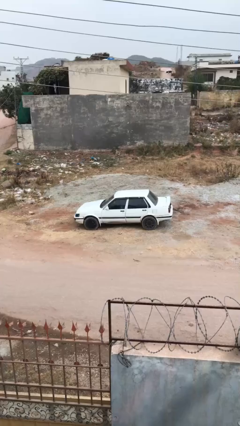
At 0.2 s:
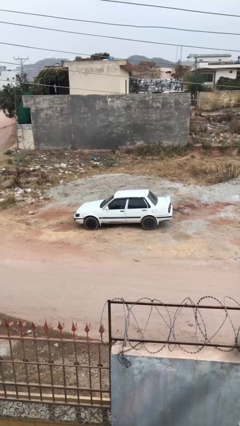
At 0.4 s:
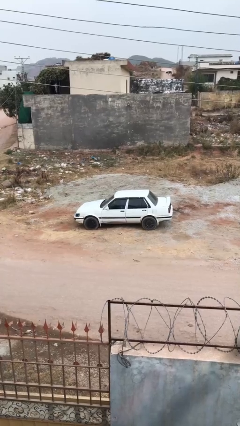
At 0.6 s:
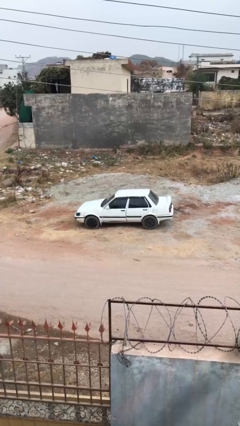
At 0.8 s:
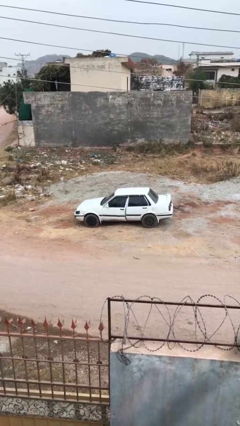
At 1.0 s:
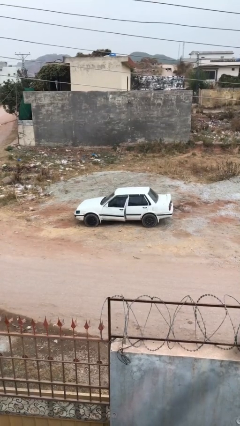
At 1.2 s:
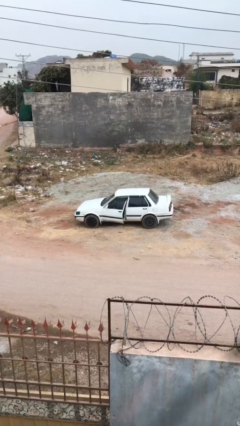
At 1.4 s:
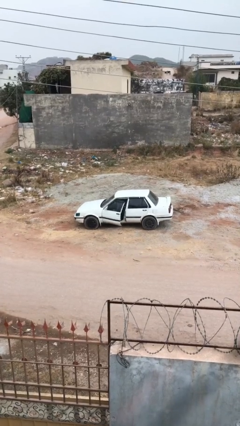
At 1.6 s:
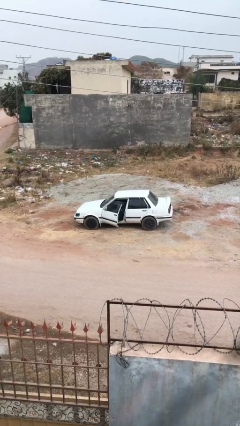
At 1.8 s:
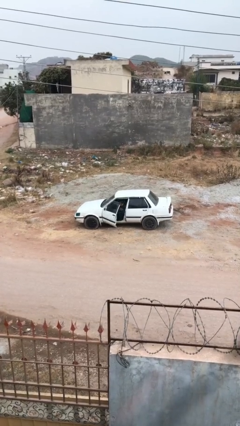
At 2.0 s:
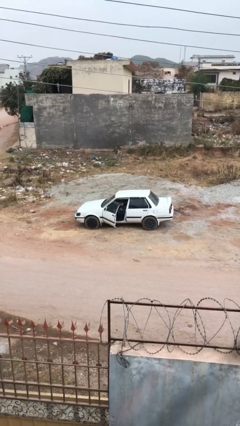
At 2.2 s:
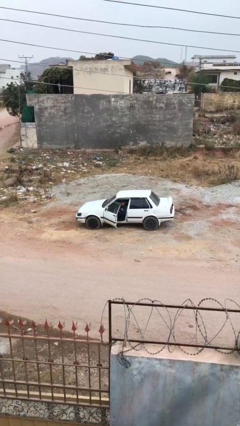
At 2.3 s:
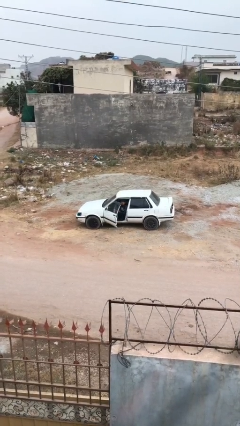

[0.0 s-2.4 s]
person opens car door

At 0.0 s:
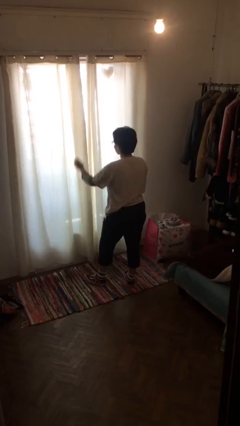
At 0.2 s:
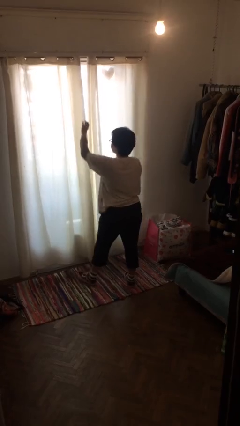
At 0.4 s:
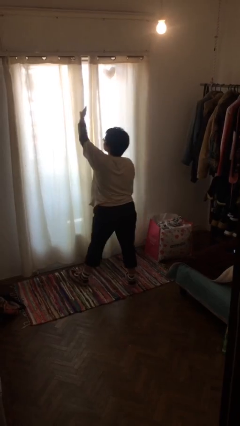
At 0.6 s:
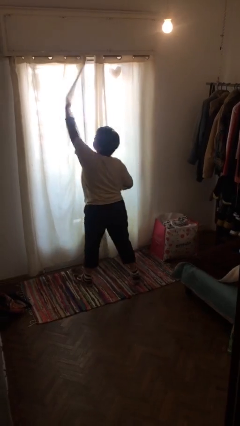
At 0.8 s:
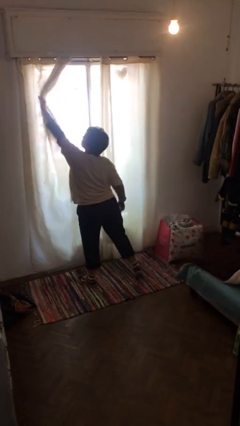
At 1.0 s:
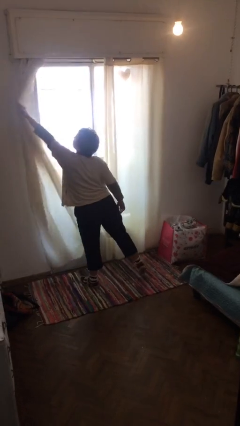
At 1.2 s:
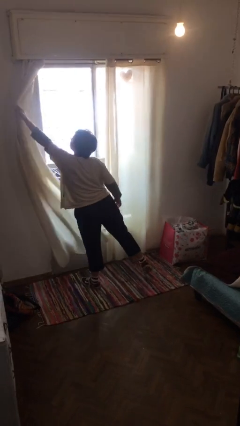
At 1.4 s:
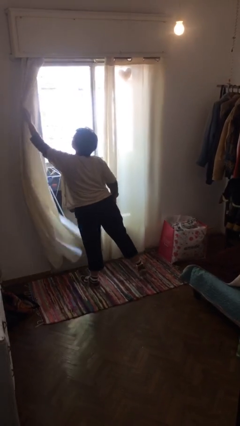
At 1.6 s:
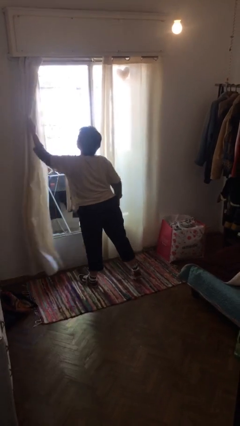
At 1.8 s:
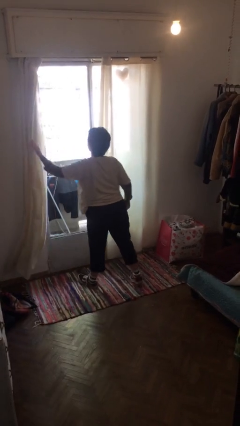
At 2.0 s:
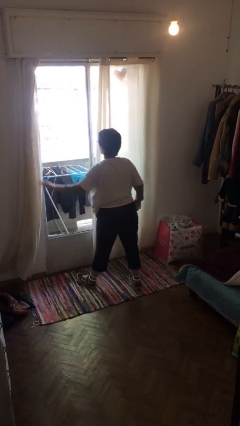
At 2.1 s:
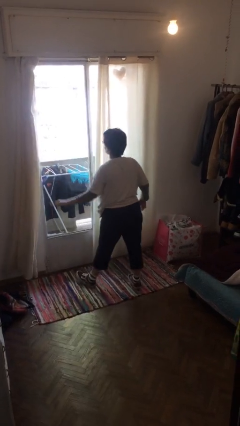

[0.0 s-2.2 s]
person opens curtains

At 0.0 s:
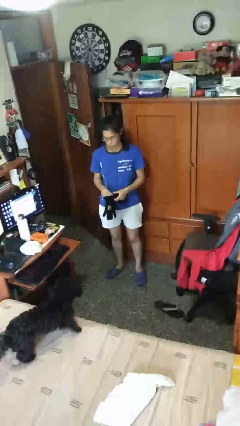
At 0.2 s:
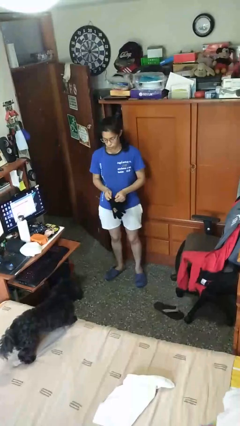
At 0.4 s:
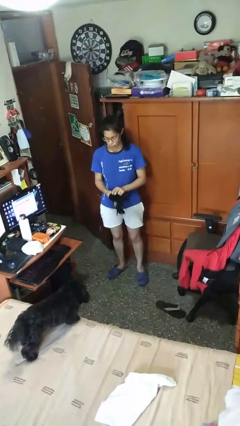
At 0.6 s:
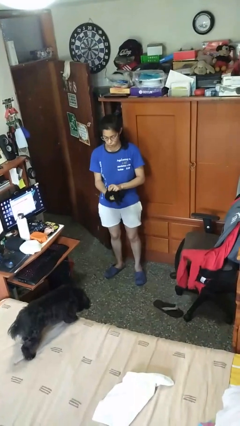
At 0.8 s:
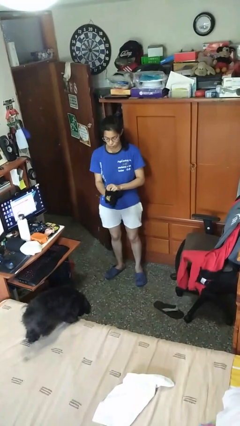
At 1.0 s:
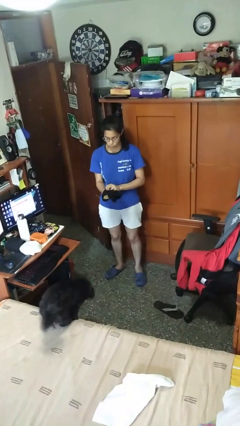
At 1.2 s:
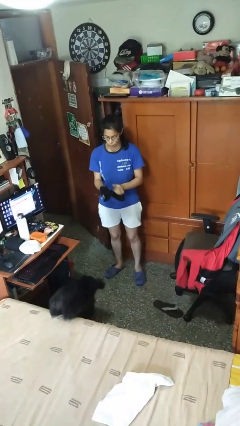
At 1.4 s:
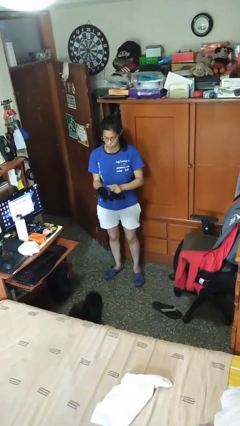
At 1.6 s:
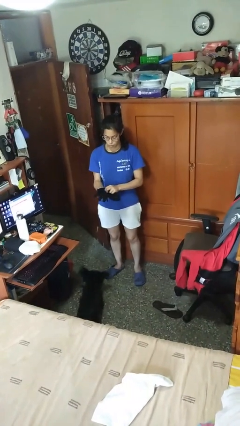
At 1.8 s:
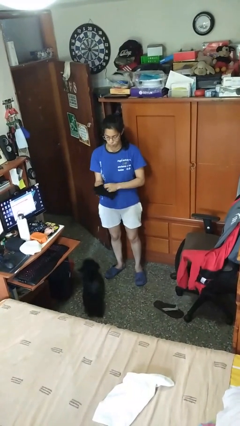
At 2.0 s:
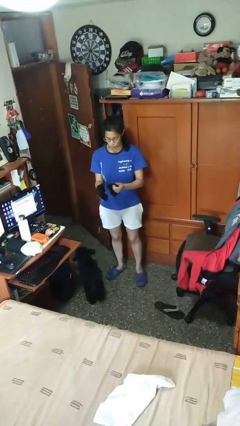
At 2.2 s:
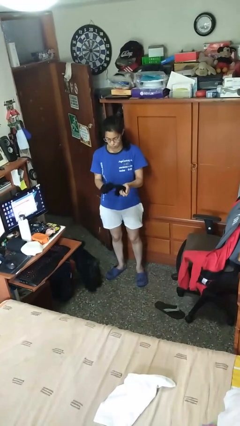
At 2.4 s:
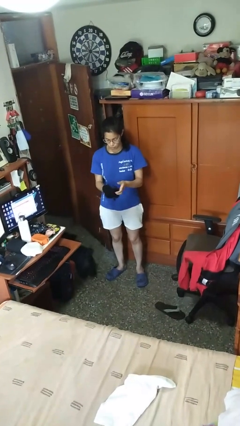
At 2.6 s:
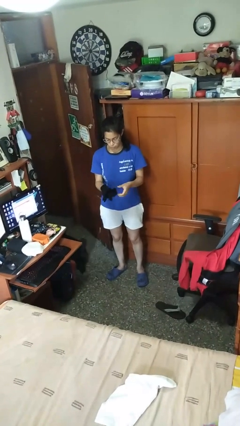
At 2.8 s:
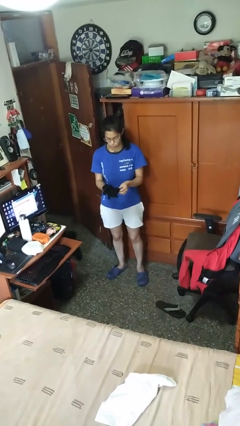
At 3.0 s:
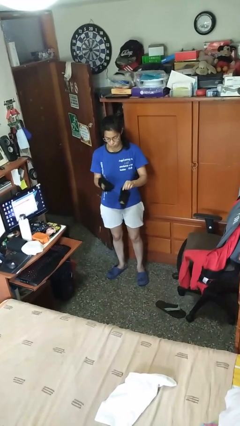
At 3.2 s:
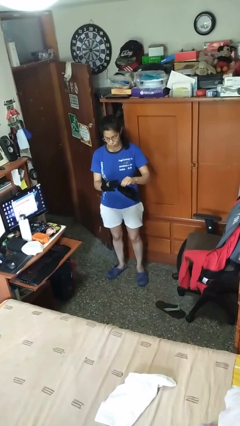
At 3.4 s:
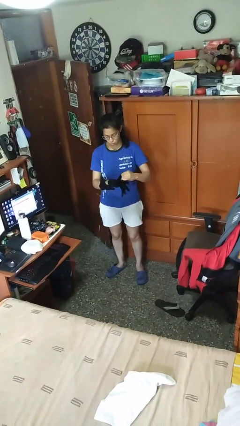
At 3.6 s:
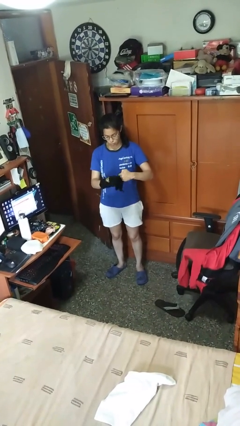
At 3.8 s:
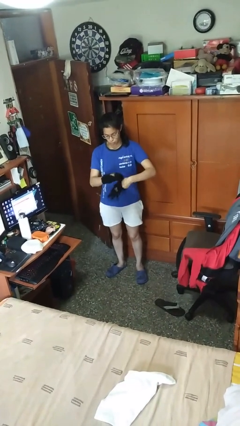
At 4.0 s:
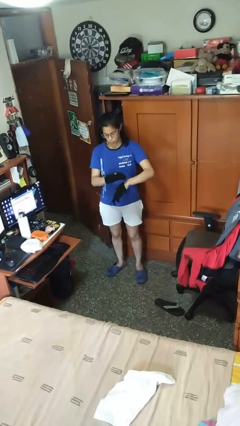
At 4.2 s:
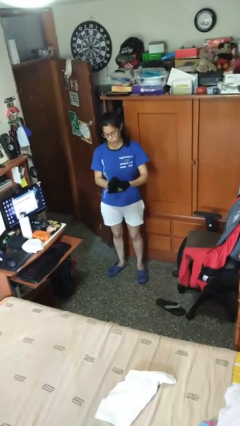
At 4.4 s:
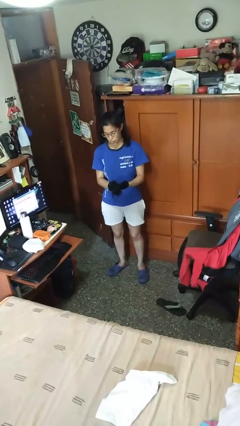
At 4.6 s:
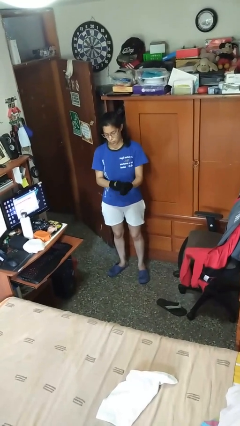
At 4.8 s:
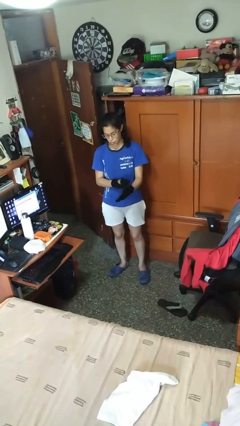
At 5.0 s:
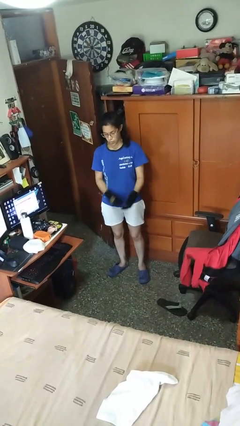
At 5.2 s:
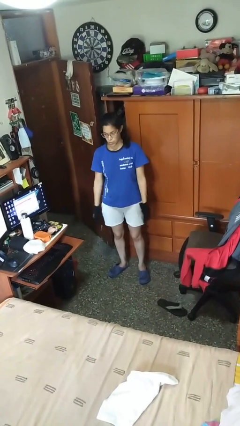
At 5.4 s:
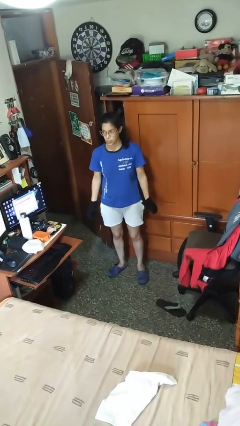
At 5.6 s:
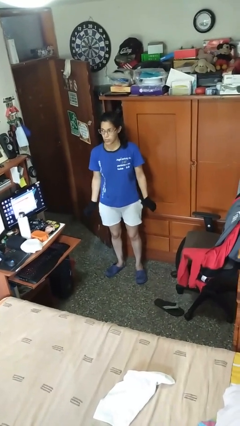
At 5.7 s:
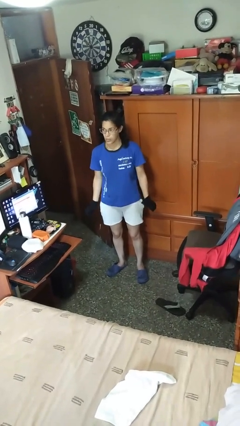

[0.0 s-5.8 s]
person puts on gloves

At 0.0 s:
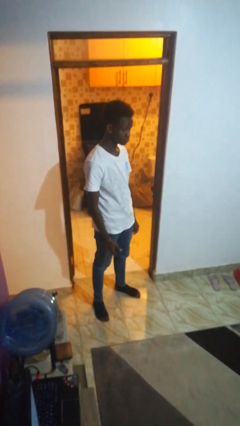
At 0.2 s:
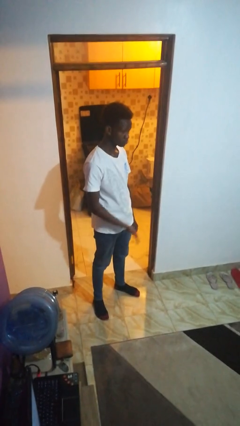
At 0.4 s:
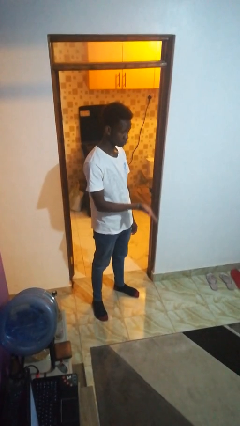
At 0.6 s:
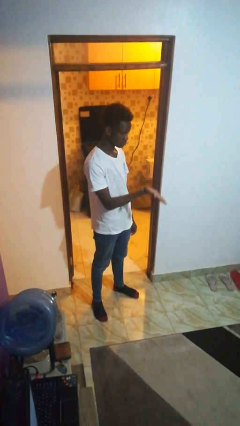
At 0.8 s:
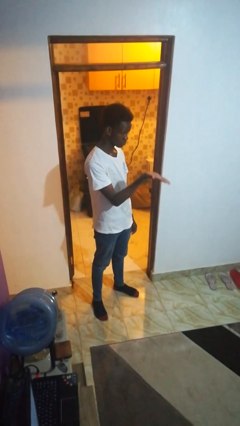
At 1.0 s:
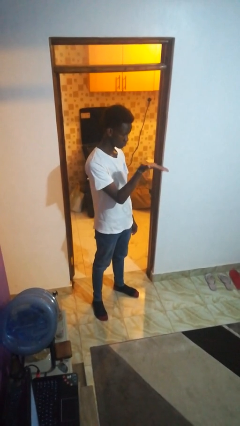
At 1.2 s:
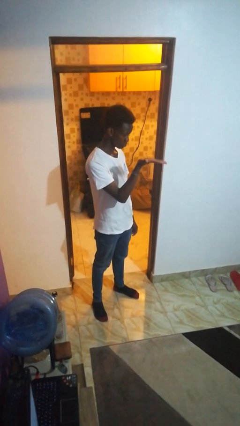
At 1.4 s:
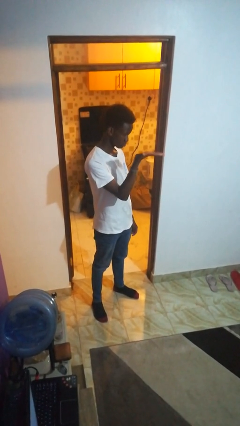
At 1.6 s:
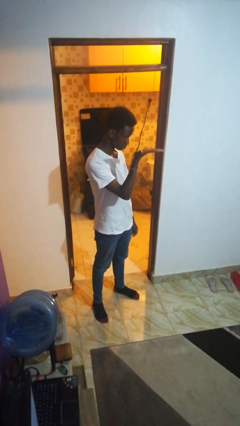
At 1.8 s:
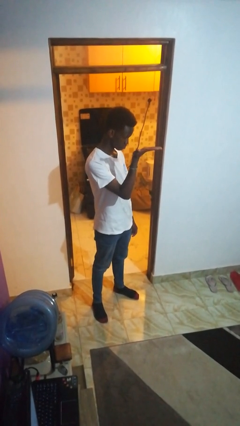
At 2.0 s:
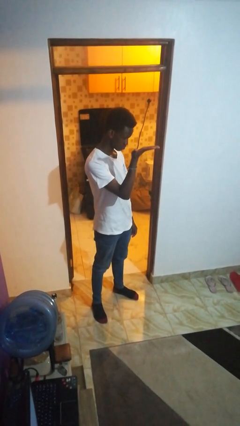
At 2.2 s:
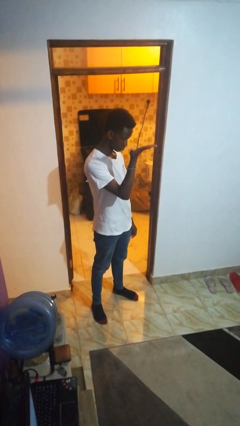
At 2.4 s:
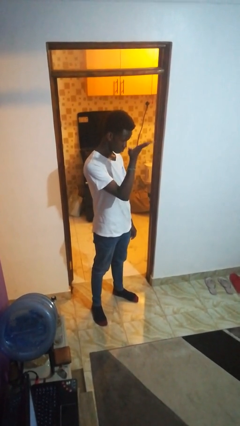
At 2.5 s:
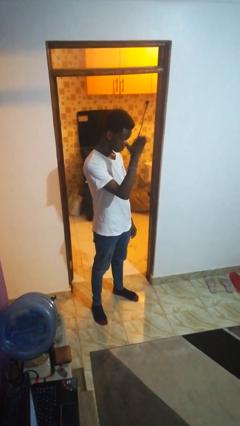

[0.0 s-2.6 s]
person gestures swipe up

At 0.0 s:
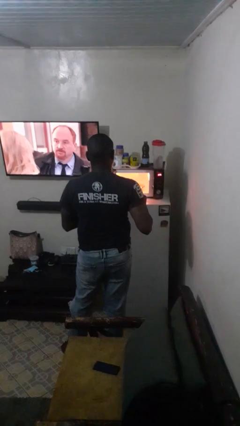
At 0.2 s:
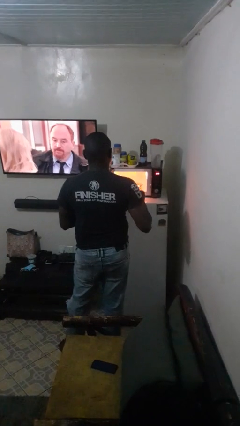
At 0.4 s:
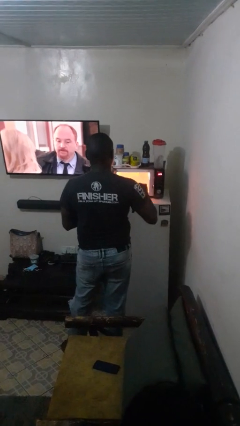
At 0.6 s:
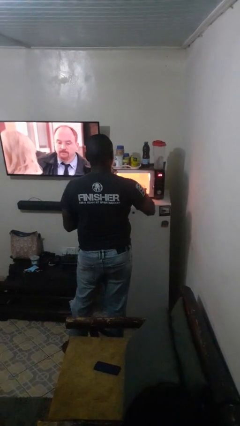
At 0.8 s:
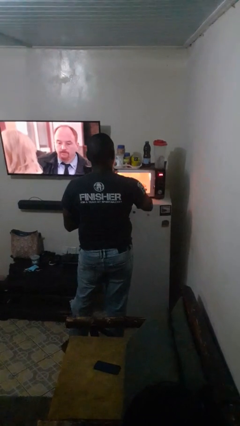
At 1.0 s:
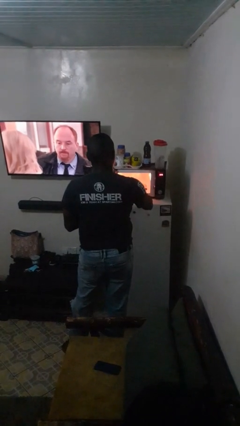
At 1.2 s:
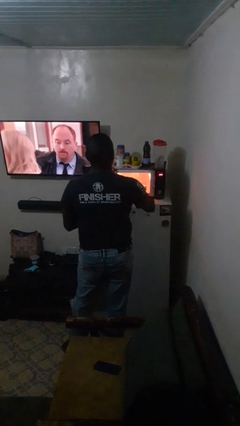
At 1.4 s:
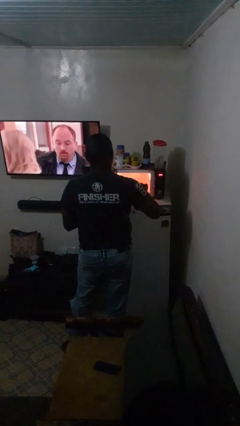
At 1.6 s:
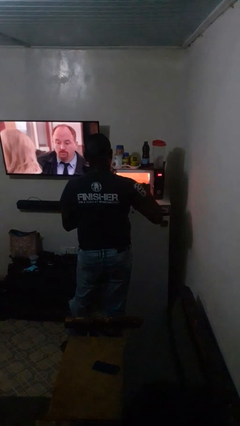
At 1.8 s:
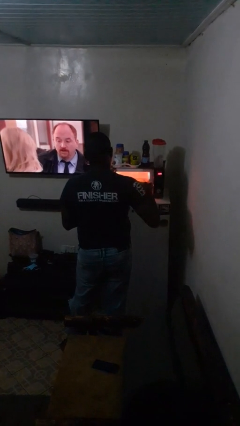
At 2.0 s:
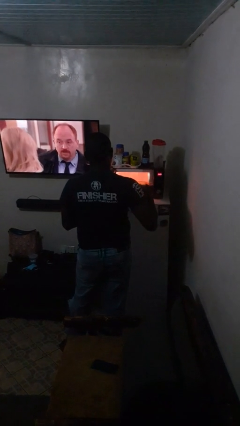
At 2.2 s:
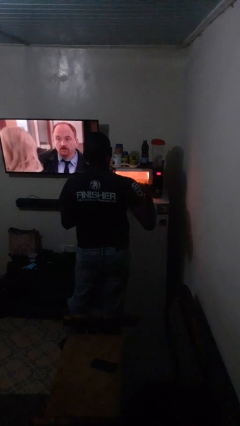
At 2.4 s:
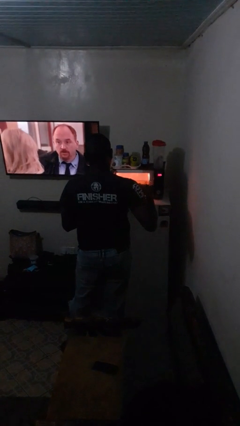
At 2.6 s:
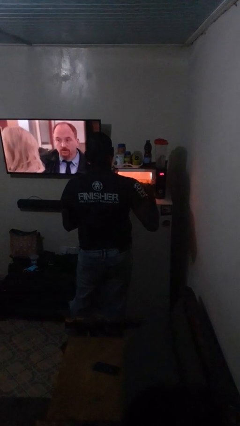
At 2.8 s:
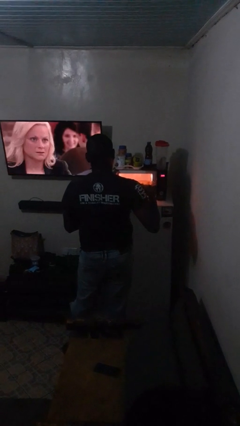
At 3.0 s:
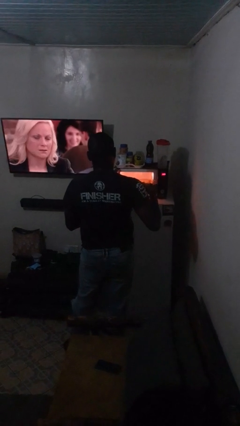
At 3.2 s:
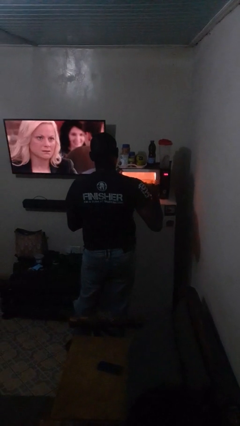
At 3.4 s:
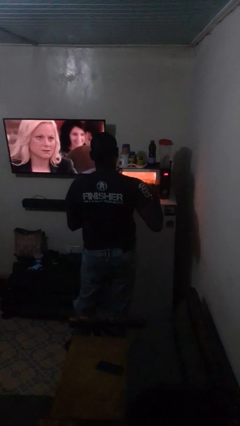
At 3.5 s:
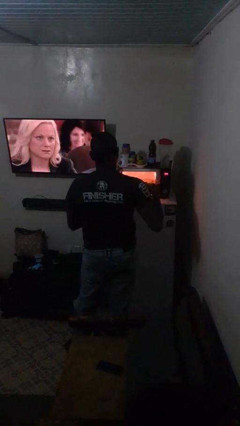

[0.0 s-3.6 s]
person takes object from microwave

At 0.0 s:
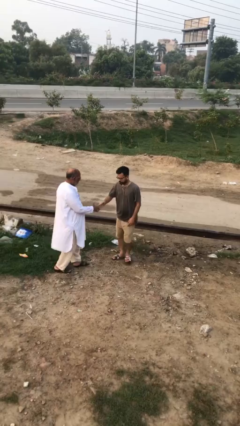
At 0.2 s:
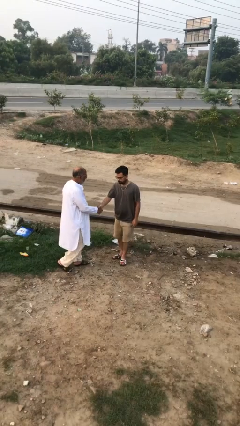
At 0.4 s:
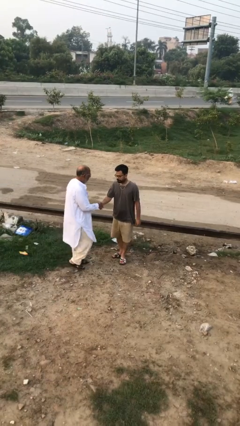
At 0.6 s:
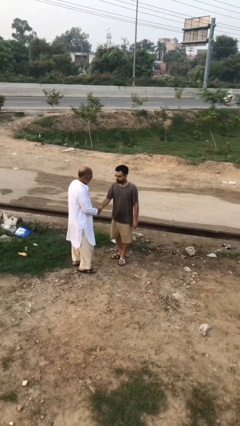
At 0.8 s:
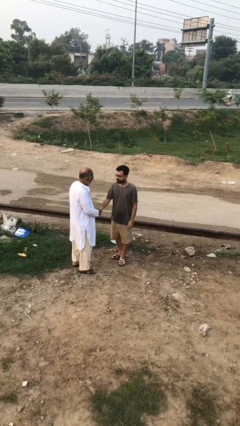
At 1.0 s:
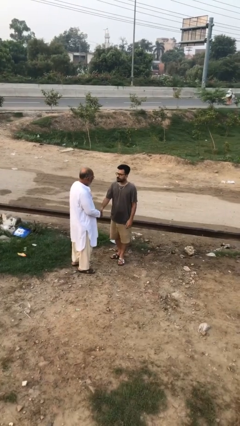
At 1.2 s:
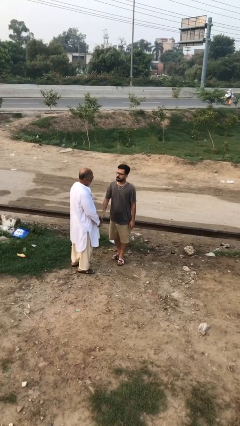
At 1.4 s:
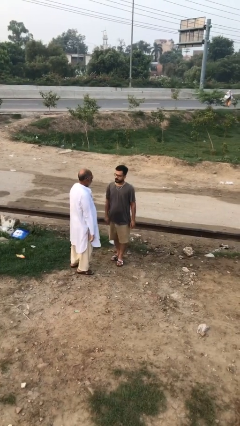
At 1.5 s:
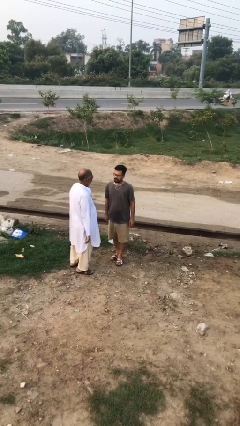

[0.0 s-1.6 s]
person shakes hand
